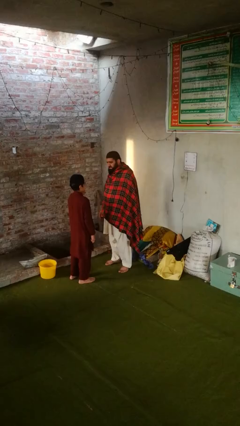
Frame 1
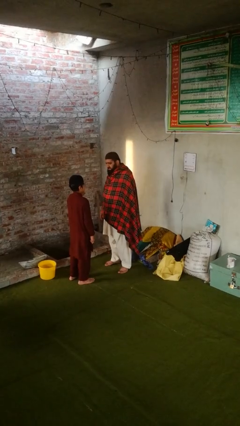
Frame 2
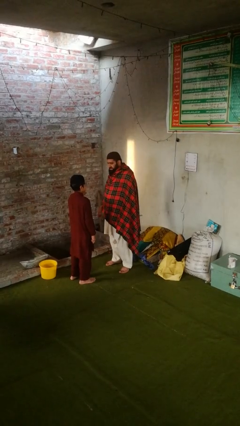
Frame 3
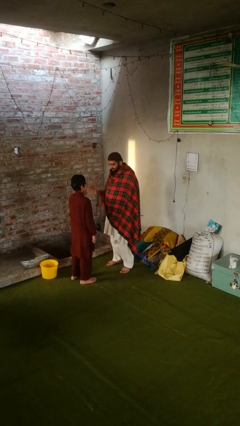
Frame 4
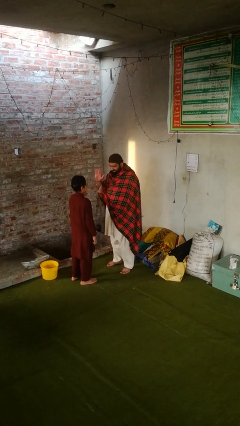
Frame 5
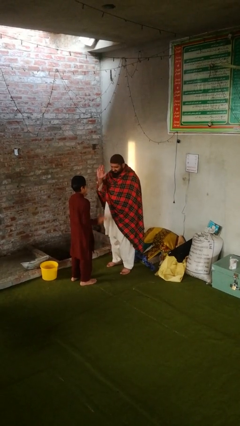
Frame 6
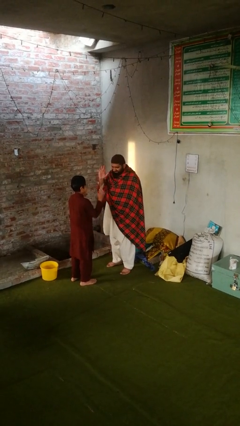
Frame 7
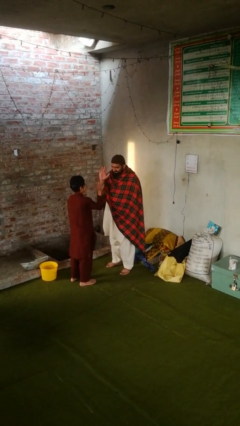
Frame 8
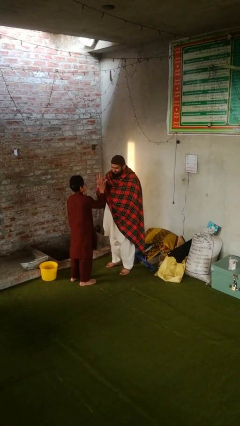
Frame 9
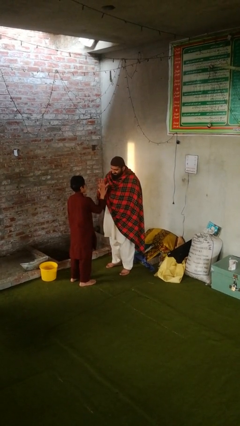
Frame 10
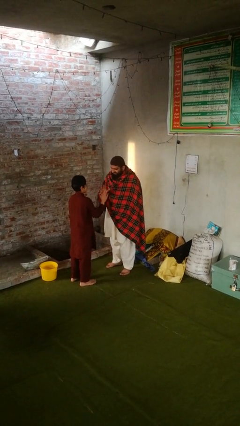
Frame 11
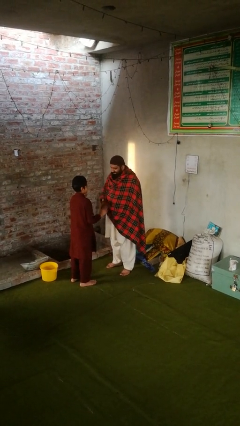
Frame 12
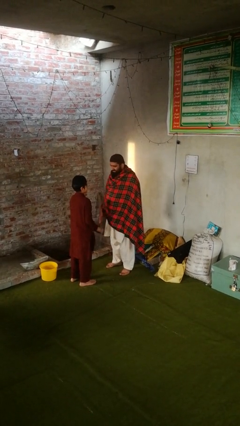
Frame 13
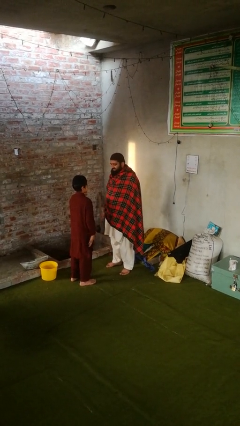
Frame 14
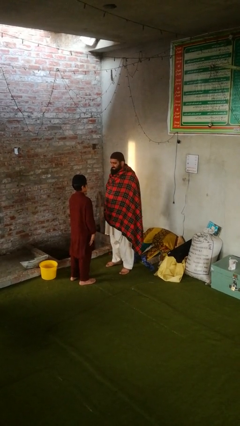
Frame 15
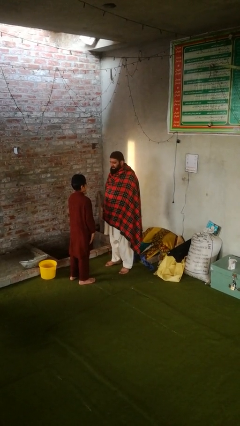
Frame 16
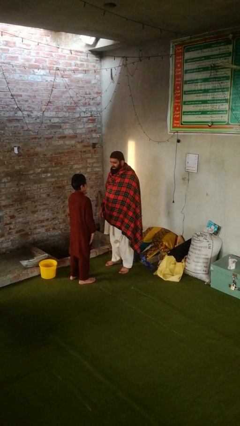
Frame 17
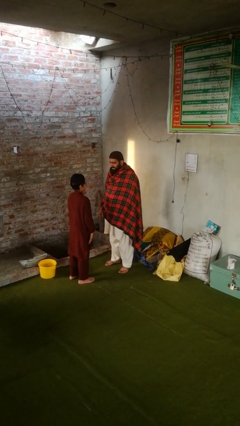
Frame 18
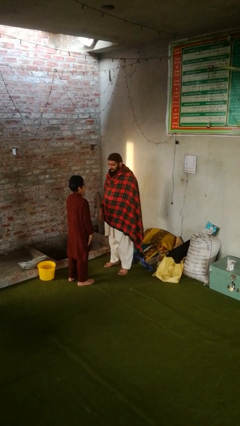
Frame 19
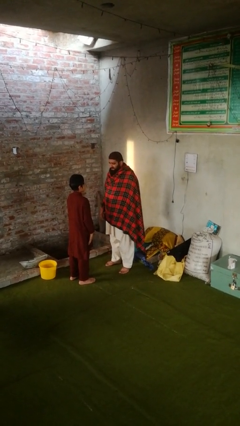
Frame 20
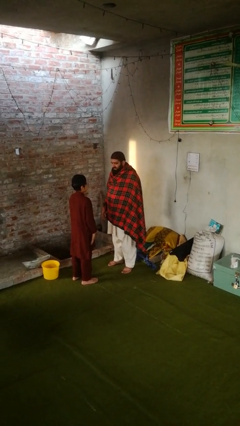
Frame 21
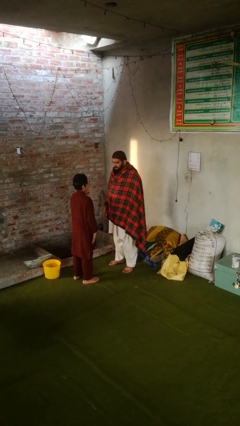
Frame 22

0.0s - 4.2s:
person highfives hand

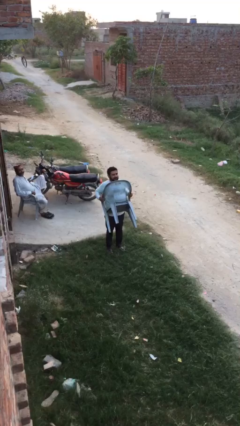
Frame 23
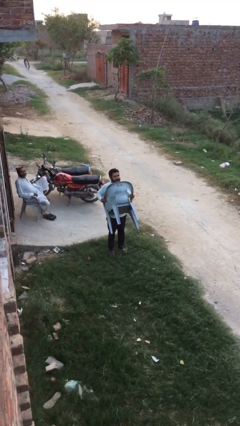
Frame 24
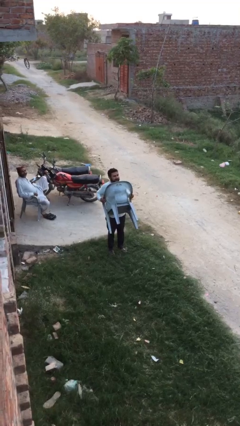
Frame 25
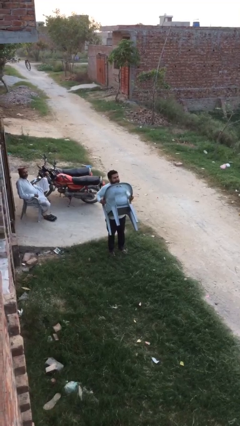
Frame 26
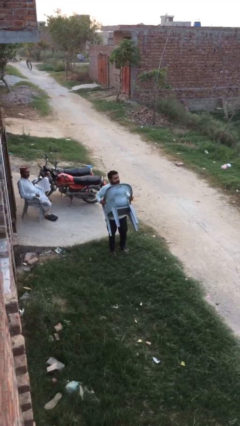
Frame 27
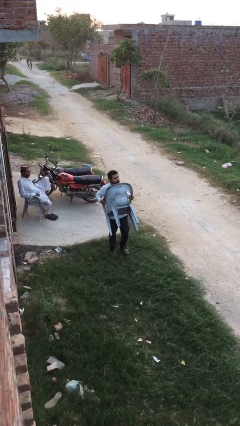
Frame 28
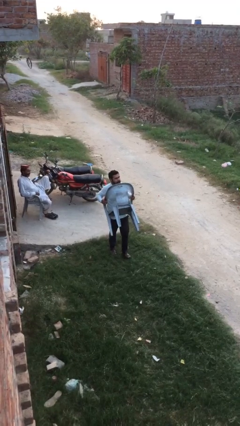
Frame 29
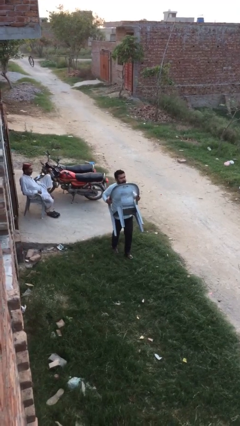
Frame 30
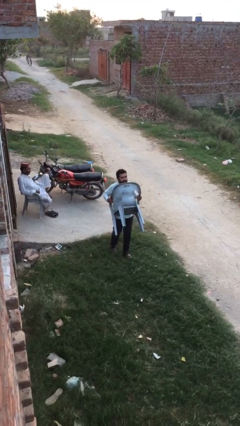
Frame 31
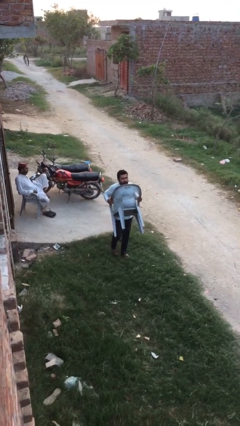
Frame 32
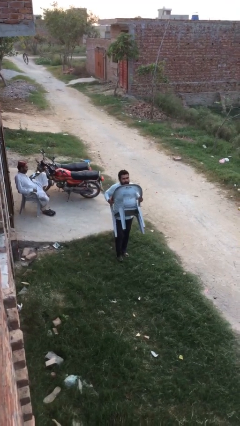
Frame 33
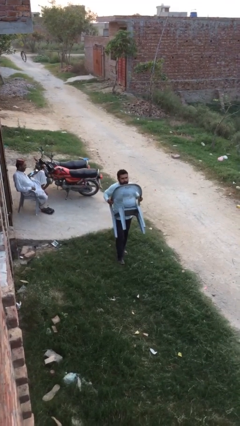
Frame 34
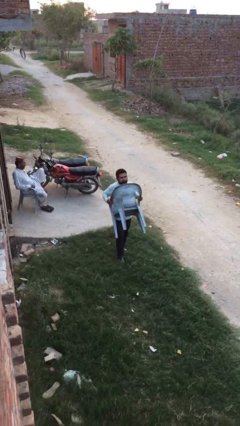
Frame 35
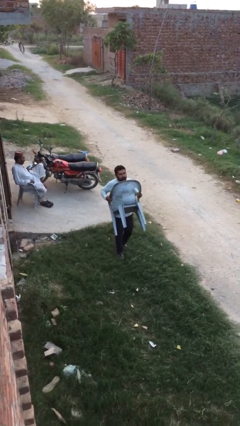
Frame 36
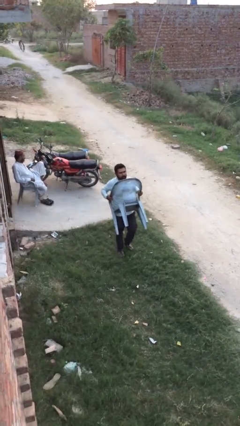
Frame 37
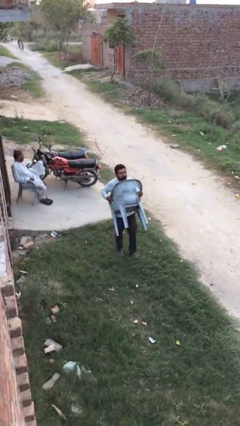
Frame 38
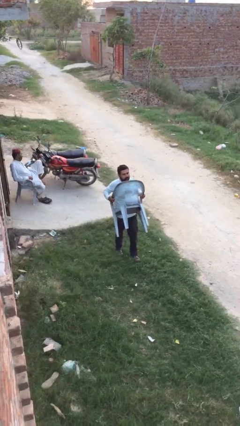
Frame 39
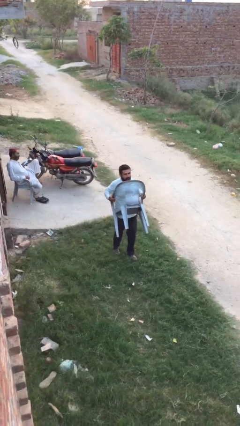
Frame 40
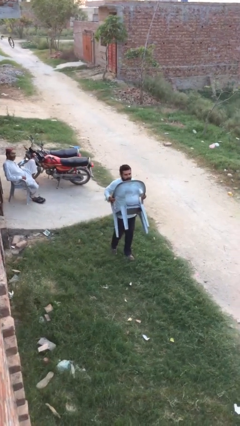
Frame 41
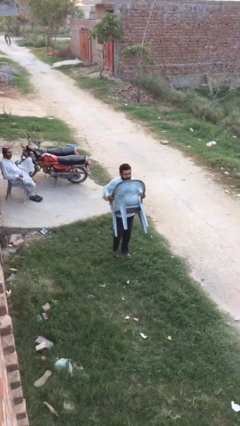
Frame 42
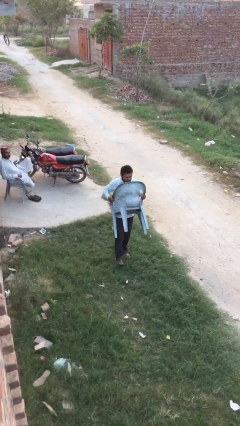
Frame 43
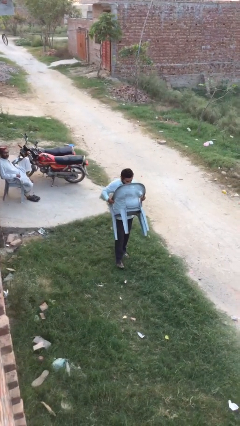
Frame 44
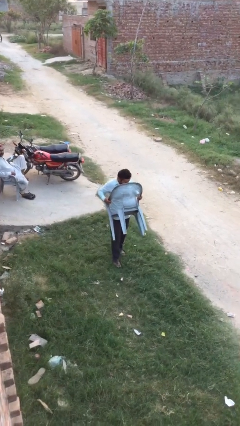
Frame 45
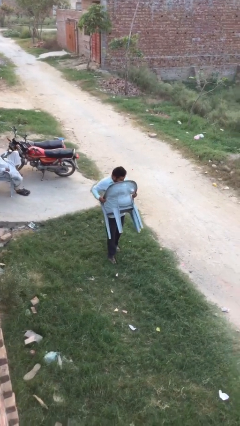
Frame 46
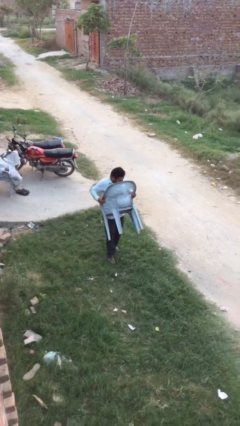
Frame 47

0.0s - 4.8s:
person carries heavy object

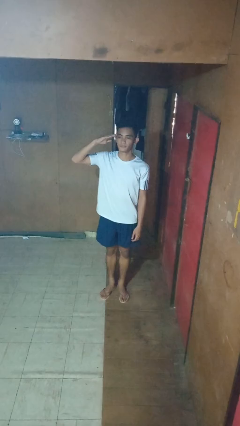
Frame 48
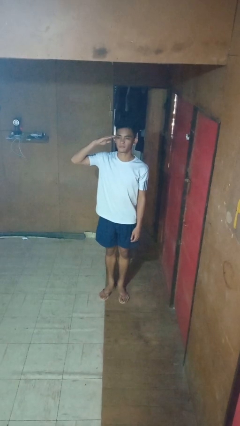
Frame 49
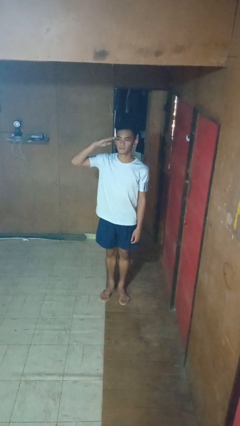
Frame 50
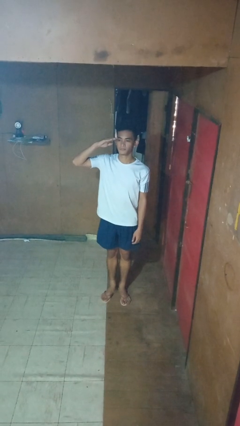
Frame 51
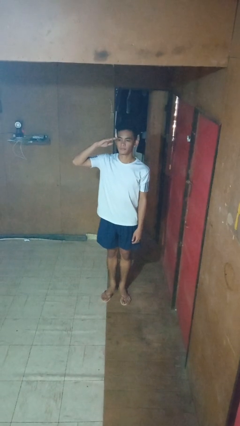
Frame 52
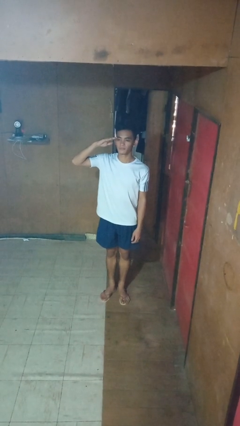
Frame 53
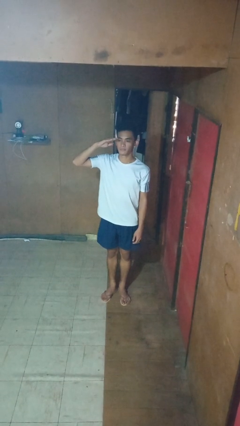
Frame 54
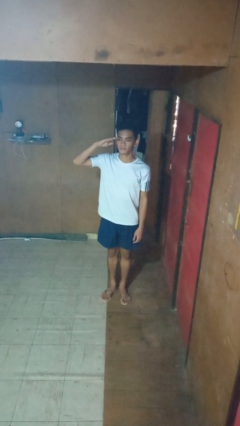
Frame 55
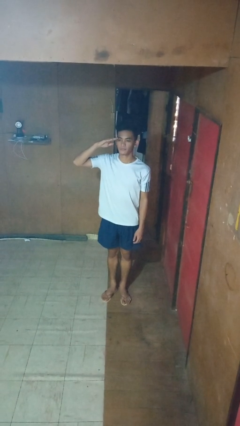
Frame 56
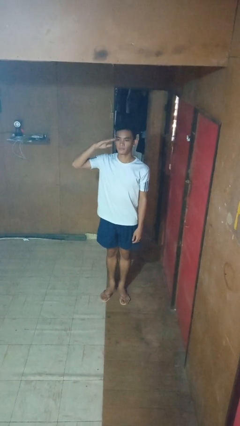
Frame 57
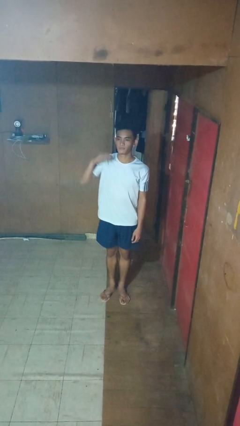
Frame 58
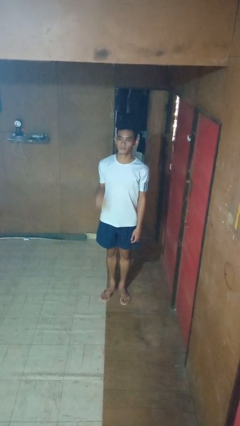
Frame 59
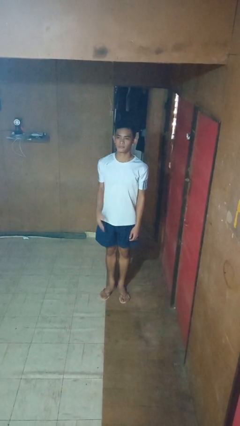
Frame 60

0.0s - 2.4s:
person salutes

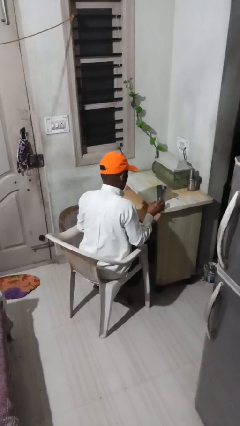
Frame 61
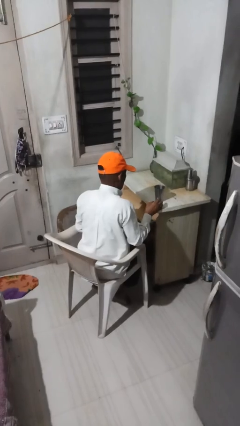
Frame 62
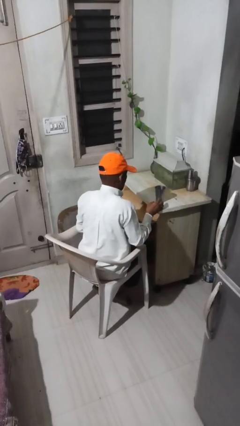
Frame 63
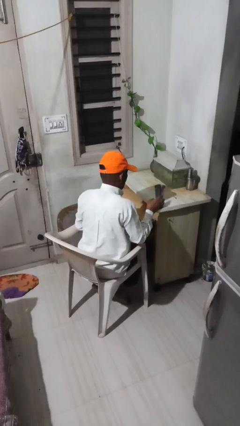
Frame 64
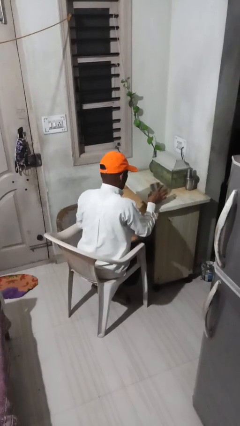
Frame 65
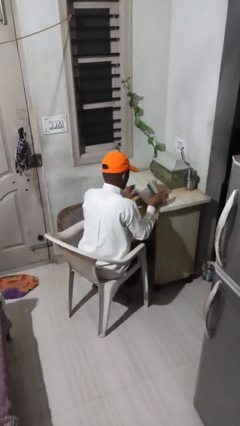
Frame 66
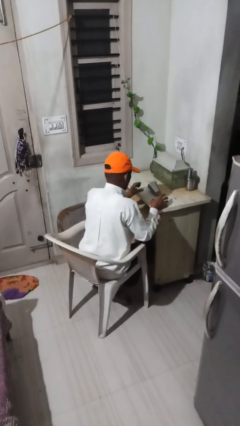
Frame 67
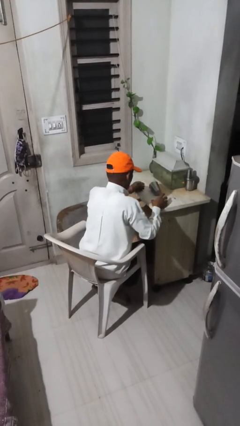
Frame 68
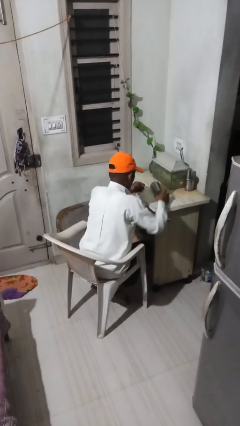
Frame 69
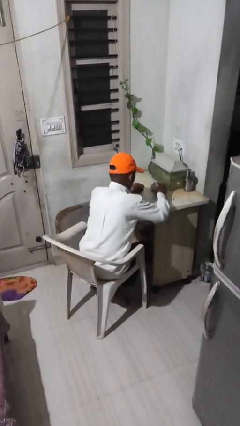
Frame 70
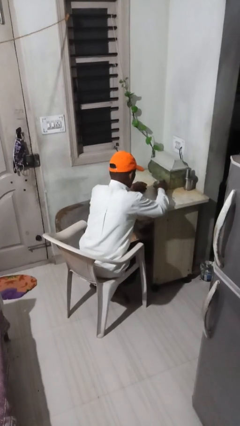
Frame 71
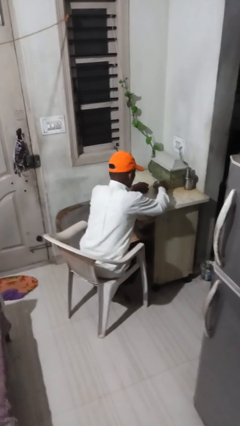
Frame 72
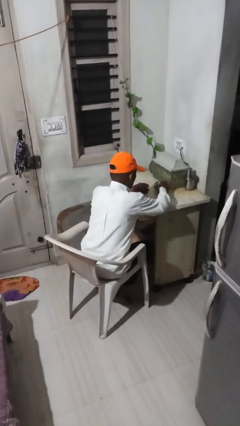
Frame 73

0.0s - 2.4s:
person knocks over glass

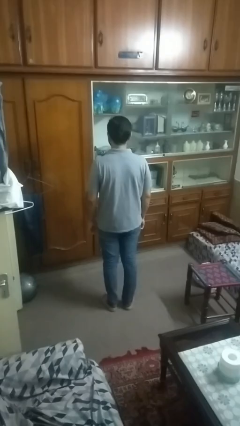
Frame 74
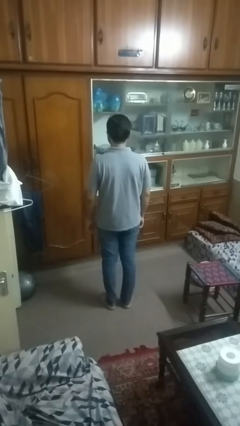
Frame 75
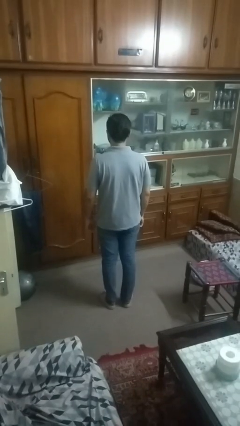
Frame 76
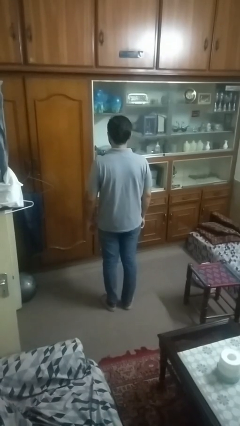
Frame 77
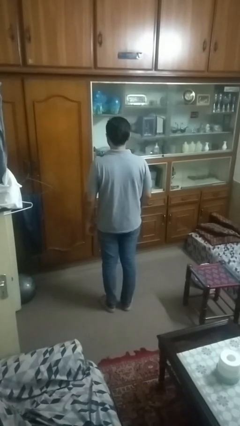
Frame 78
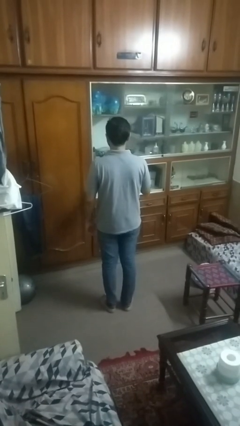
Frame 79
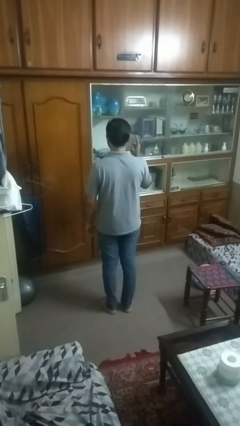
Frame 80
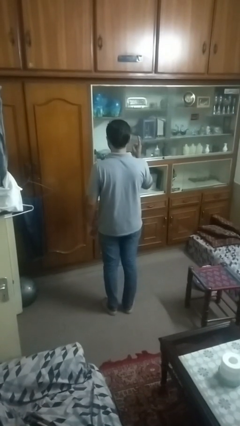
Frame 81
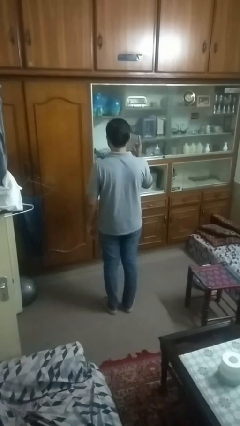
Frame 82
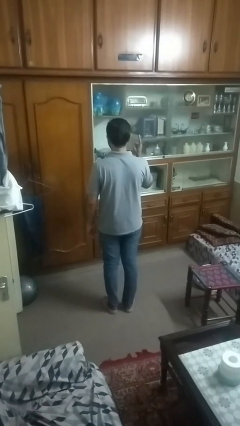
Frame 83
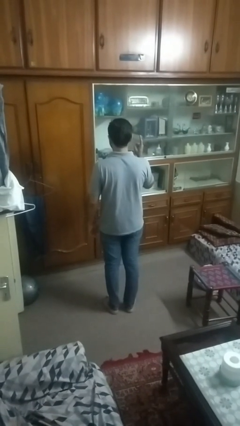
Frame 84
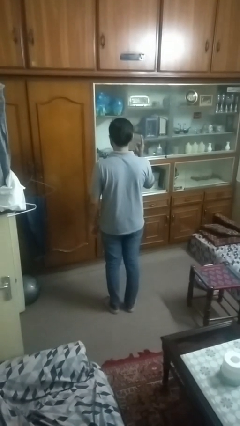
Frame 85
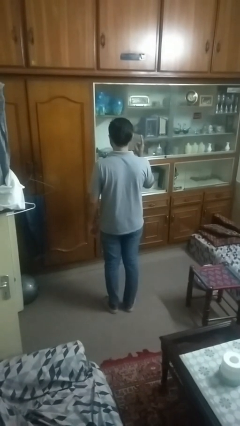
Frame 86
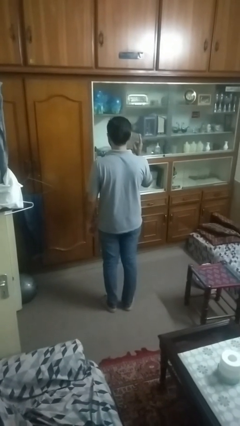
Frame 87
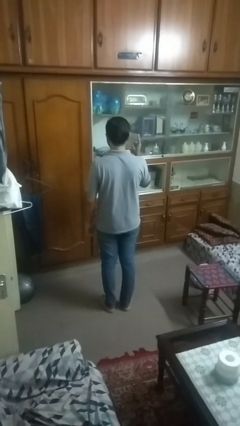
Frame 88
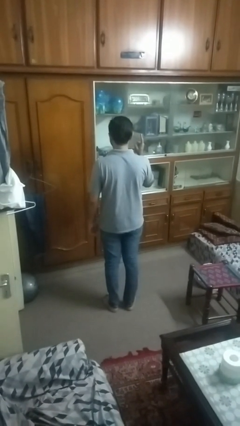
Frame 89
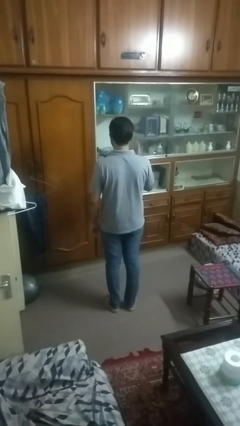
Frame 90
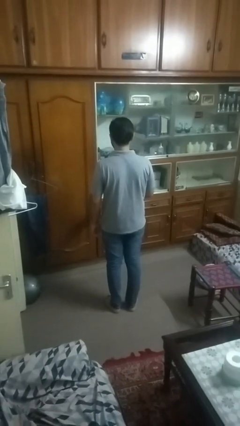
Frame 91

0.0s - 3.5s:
person gestures number one

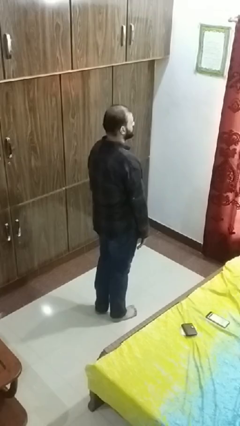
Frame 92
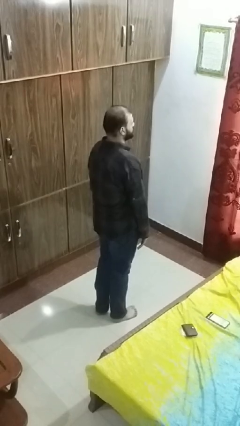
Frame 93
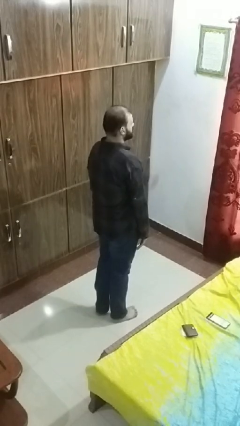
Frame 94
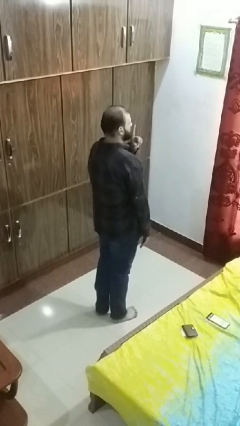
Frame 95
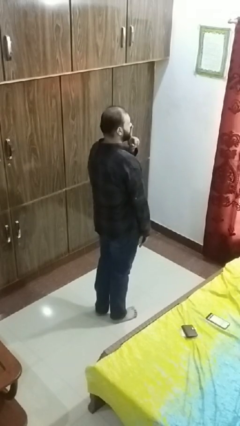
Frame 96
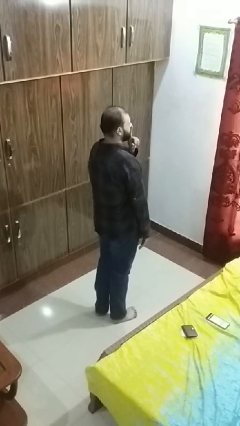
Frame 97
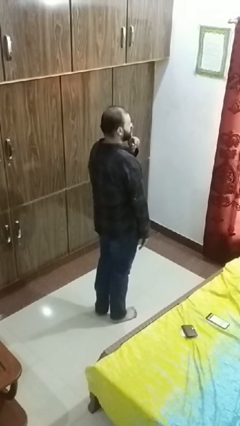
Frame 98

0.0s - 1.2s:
person gestures be quiet
